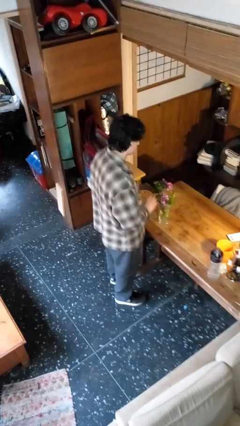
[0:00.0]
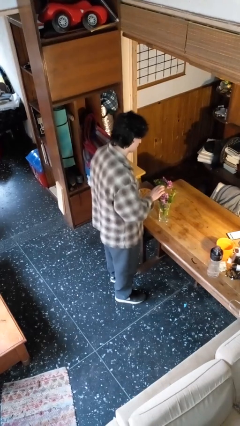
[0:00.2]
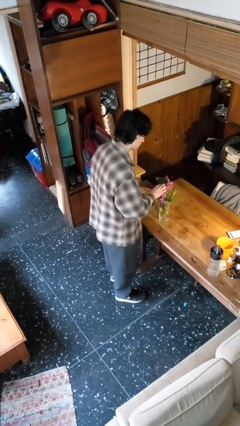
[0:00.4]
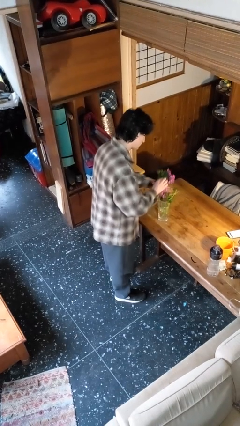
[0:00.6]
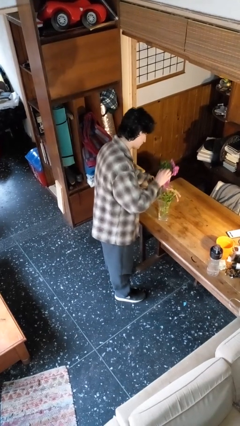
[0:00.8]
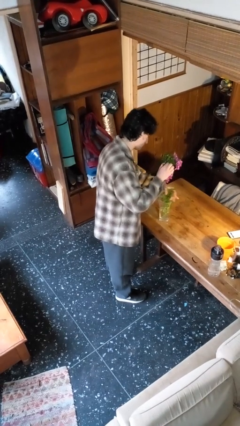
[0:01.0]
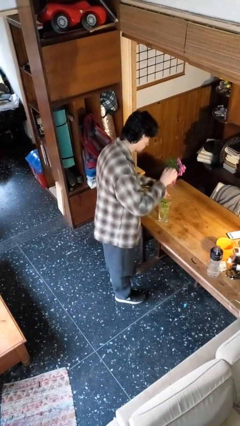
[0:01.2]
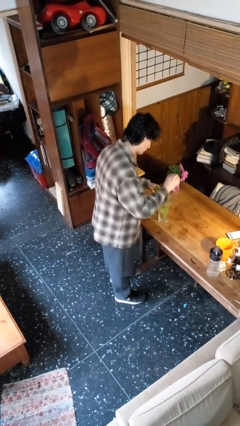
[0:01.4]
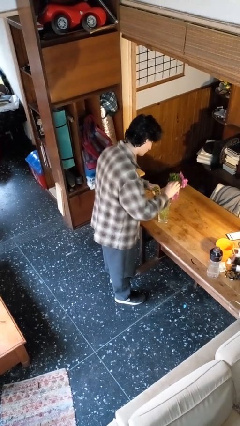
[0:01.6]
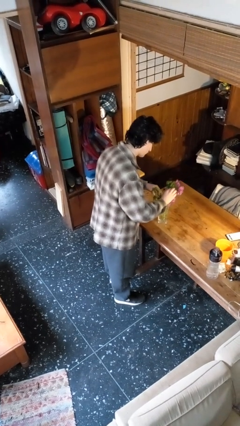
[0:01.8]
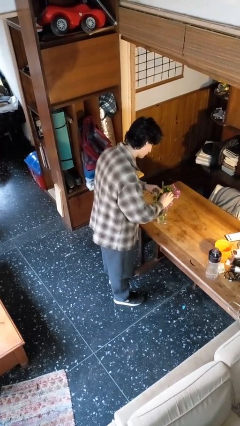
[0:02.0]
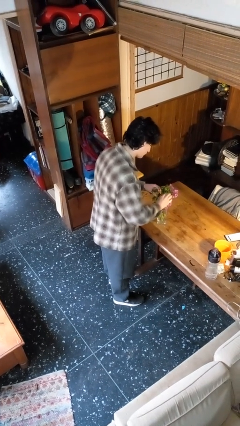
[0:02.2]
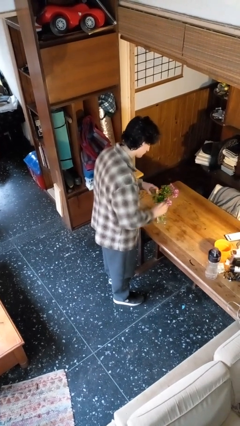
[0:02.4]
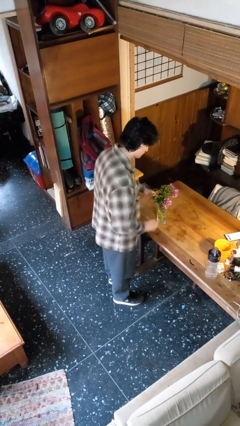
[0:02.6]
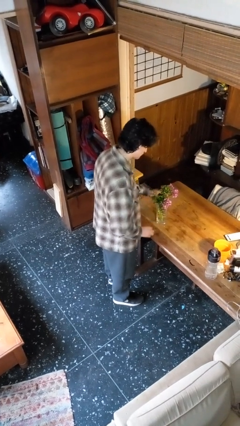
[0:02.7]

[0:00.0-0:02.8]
person arranges flowers in vase

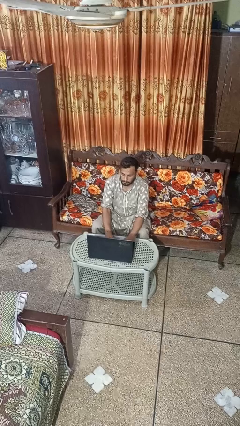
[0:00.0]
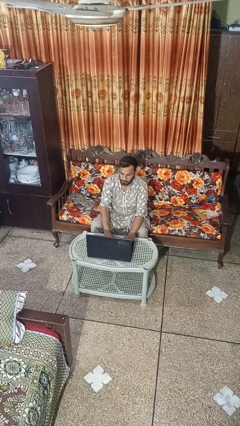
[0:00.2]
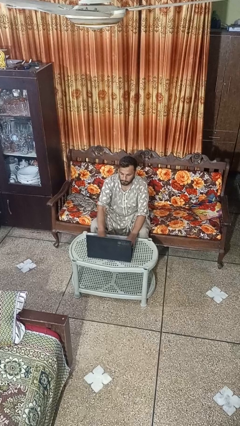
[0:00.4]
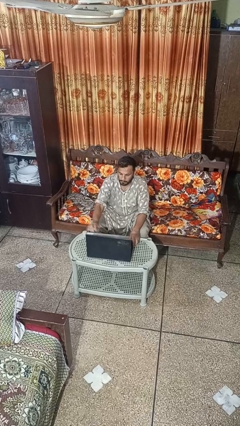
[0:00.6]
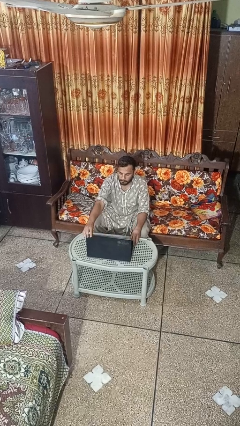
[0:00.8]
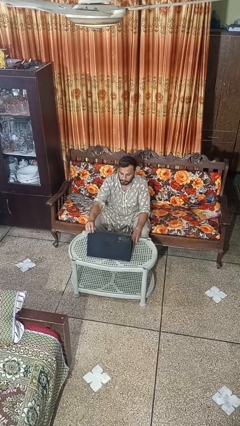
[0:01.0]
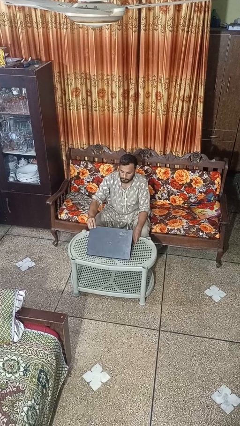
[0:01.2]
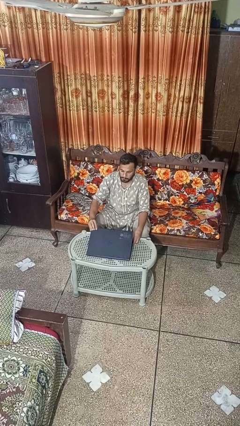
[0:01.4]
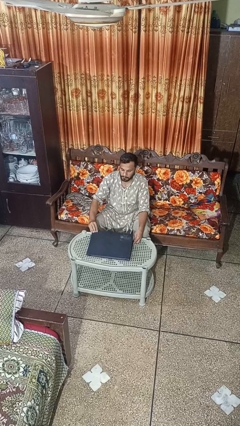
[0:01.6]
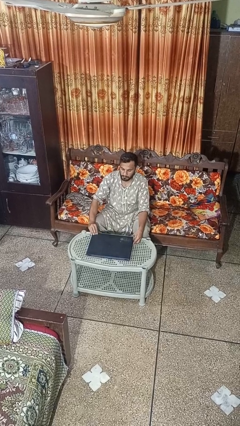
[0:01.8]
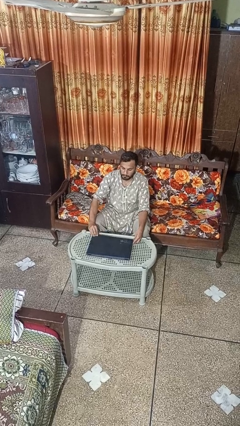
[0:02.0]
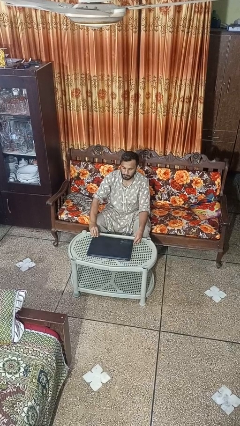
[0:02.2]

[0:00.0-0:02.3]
person closes laptop

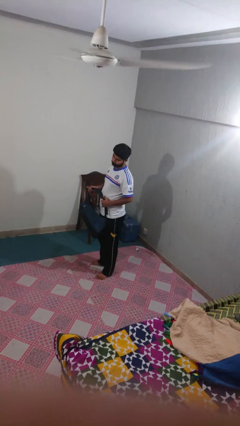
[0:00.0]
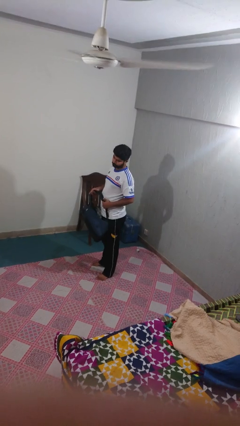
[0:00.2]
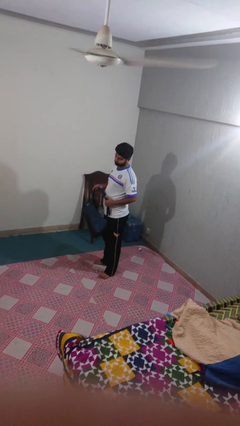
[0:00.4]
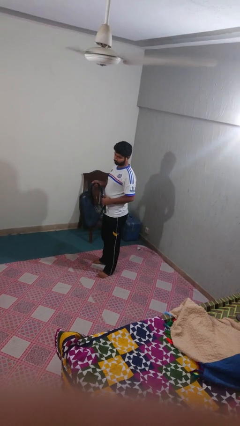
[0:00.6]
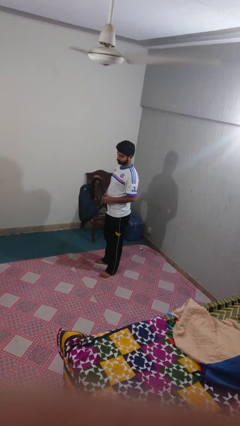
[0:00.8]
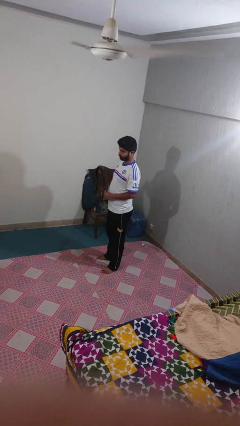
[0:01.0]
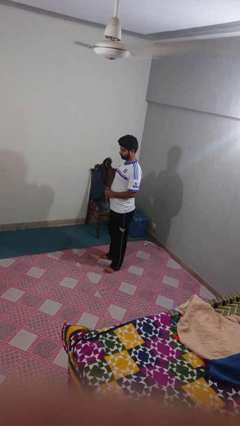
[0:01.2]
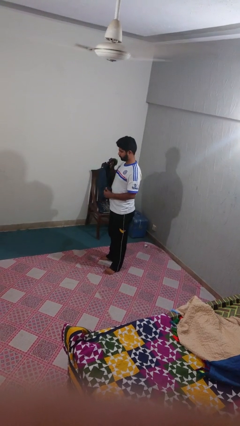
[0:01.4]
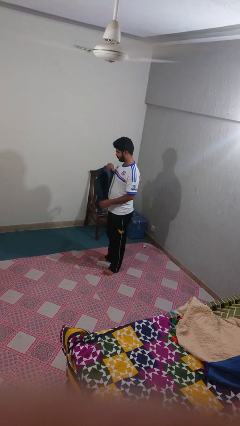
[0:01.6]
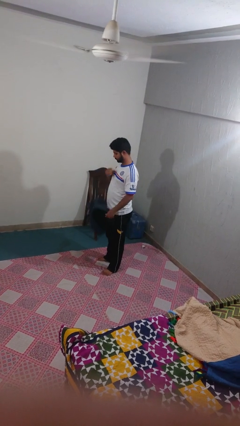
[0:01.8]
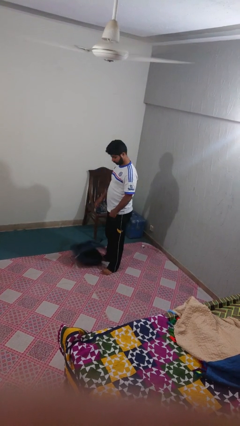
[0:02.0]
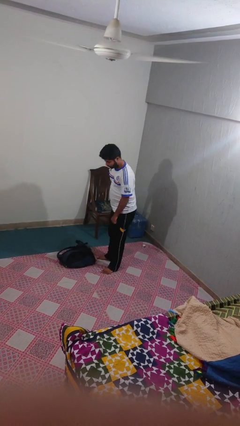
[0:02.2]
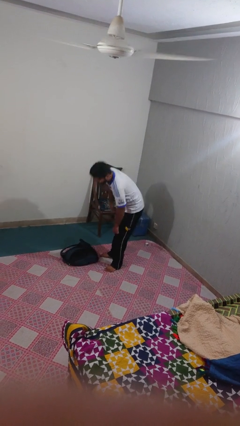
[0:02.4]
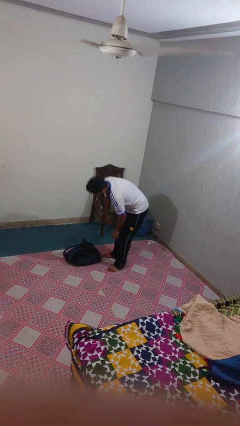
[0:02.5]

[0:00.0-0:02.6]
person drops object

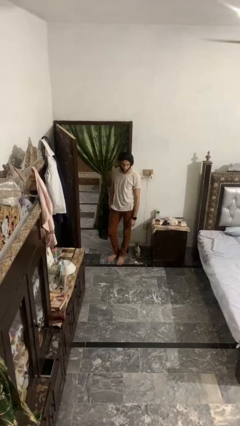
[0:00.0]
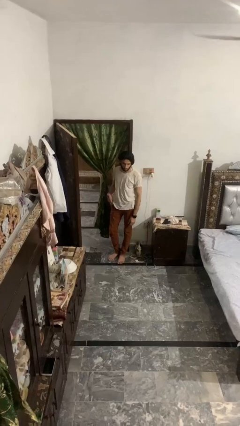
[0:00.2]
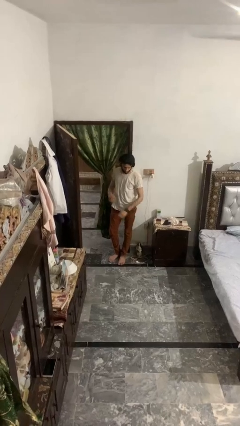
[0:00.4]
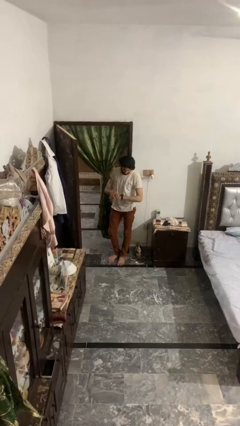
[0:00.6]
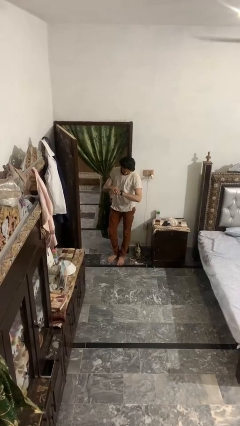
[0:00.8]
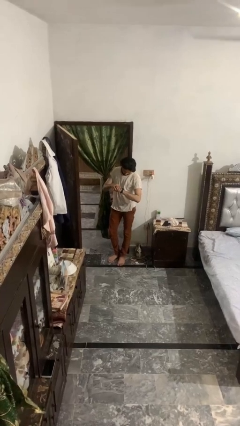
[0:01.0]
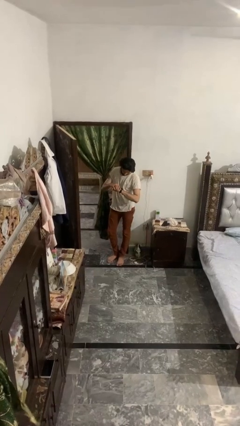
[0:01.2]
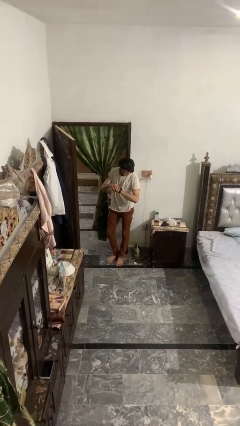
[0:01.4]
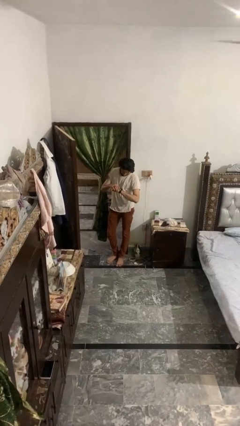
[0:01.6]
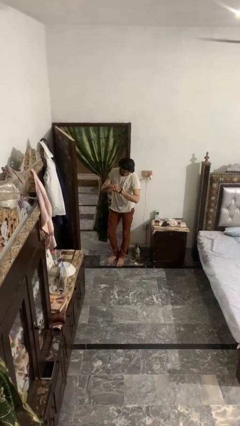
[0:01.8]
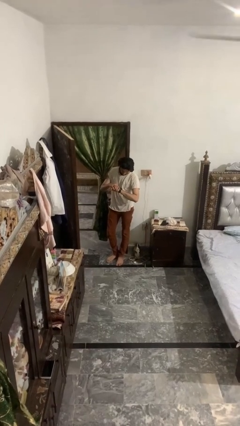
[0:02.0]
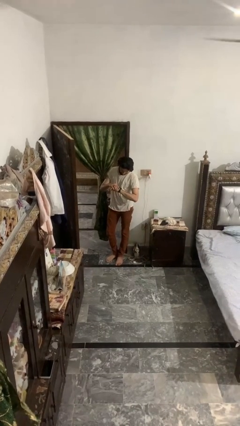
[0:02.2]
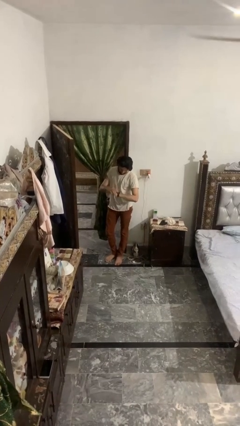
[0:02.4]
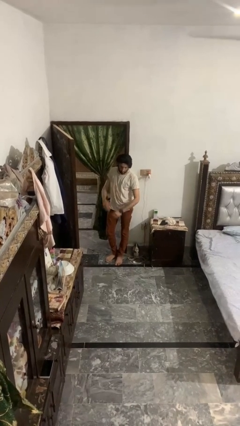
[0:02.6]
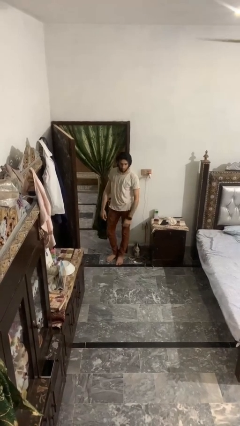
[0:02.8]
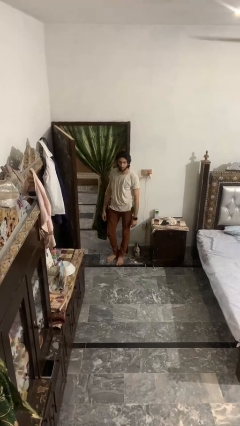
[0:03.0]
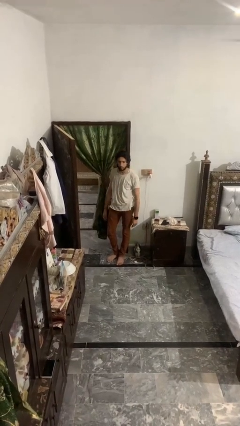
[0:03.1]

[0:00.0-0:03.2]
person looks at wristwatch

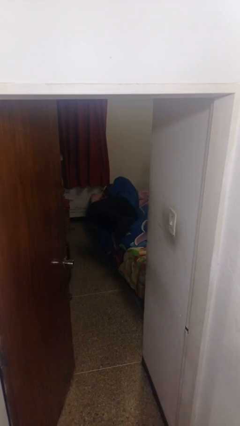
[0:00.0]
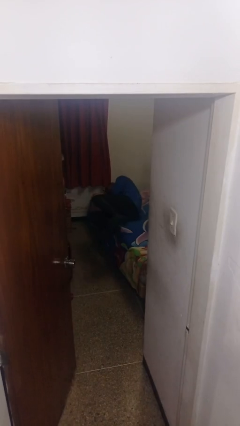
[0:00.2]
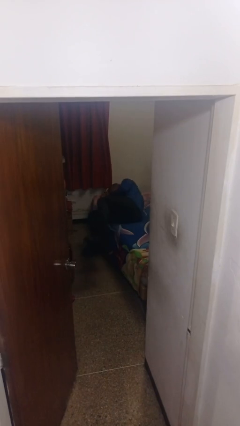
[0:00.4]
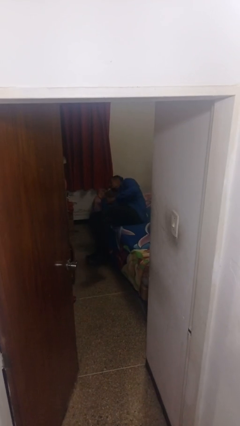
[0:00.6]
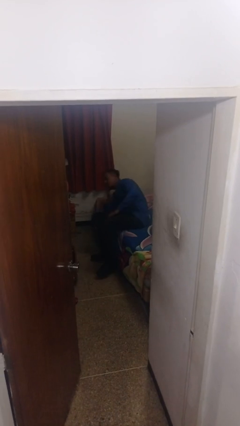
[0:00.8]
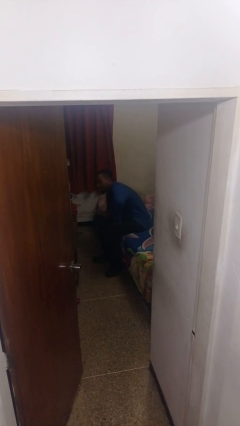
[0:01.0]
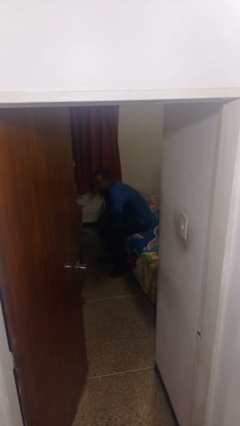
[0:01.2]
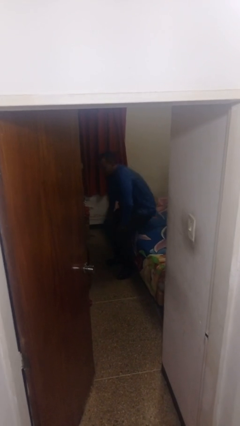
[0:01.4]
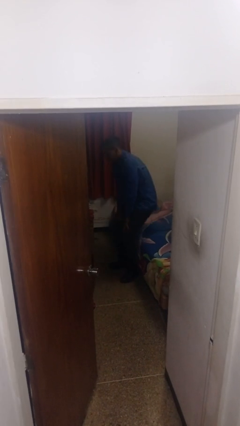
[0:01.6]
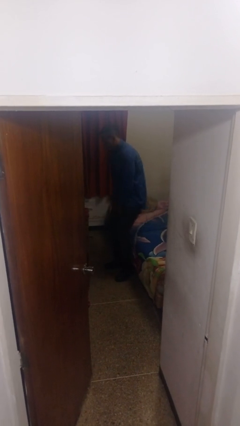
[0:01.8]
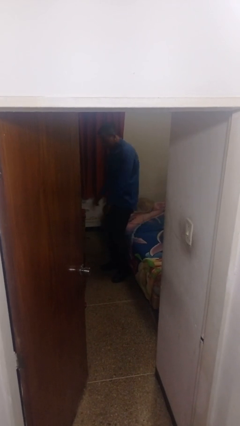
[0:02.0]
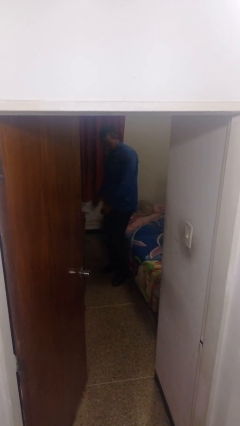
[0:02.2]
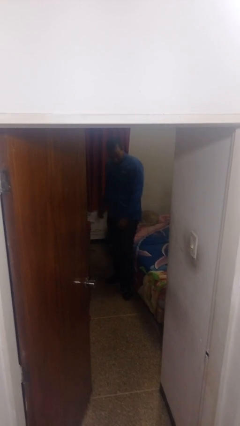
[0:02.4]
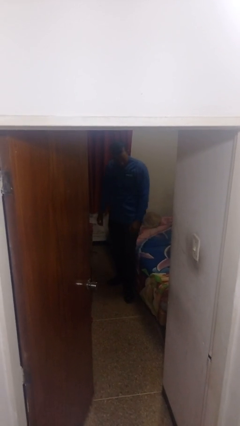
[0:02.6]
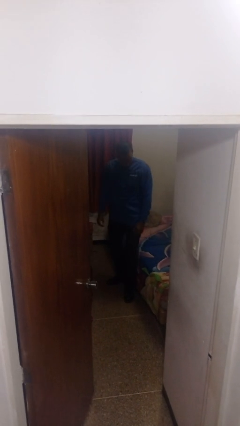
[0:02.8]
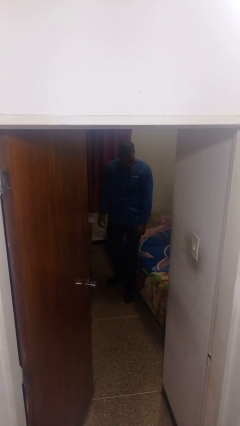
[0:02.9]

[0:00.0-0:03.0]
person stands up

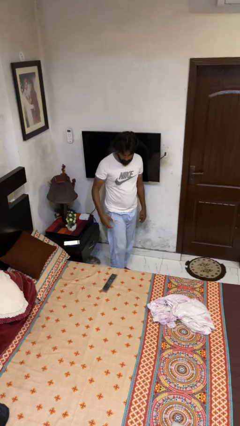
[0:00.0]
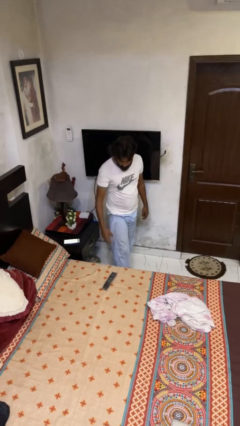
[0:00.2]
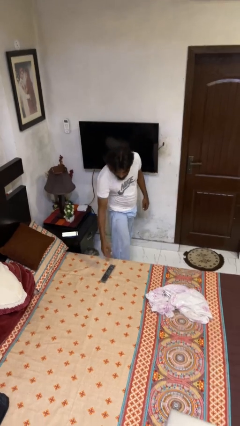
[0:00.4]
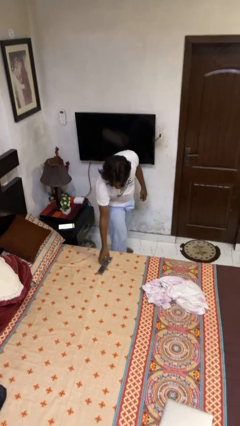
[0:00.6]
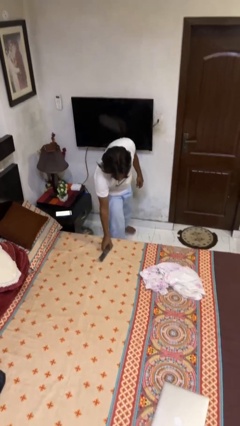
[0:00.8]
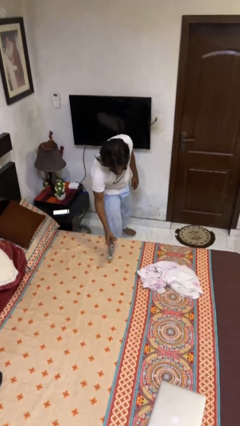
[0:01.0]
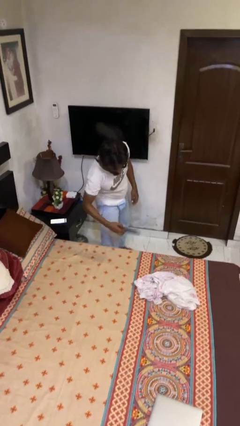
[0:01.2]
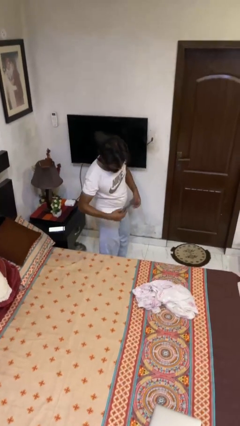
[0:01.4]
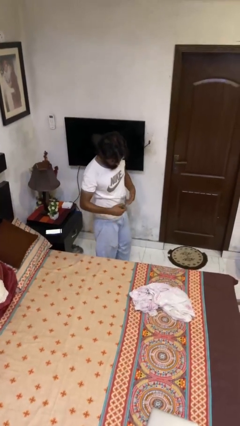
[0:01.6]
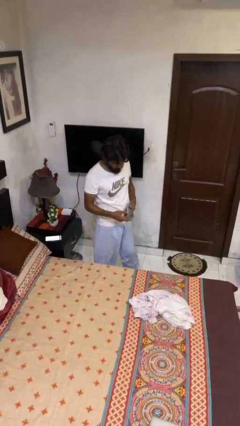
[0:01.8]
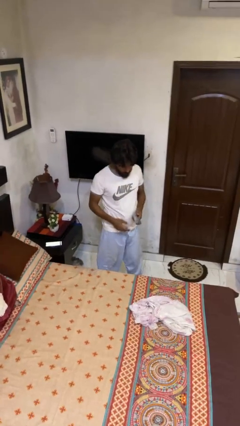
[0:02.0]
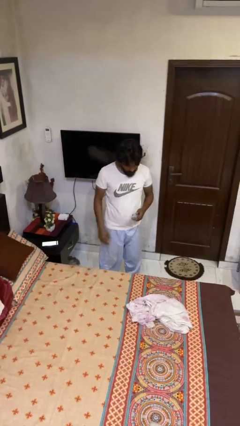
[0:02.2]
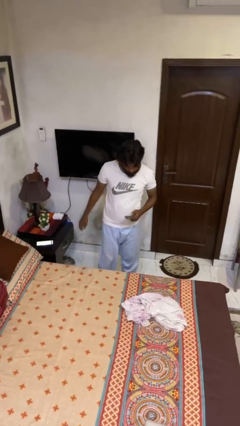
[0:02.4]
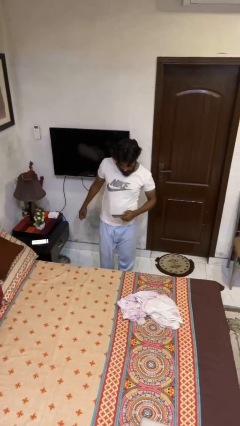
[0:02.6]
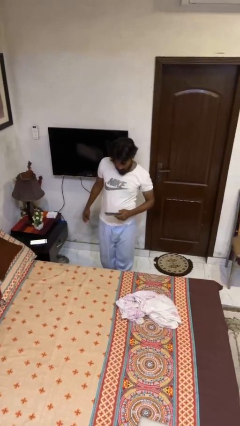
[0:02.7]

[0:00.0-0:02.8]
person picks up object from bed

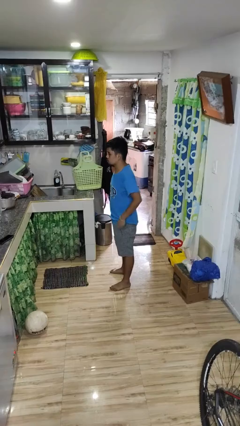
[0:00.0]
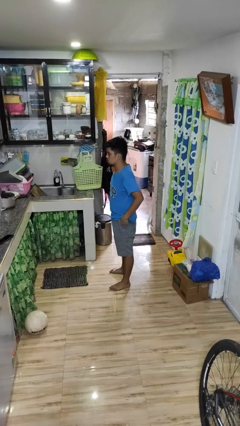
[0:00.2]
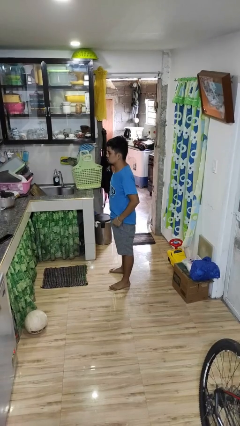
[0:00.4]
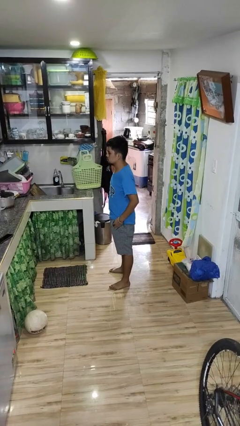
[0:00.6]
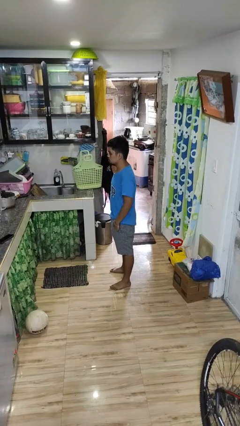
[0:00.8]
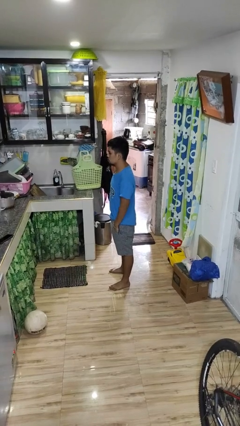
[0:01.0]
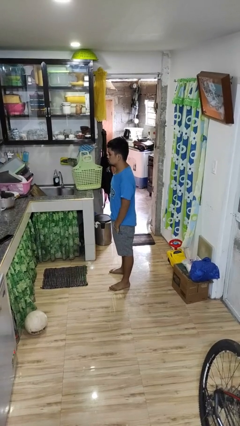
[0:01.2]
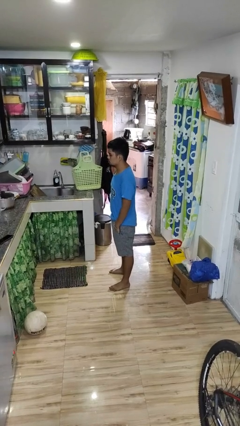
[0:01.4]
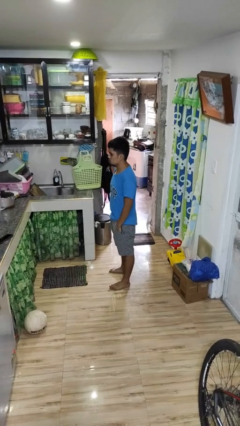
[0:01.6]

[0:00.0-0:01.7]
person puts hands in back pockets
